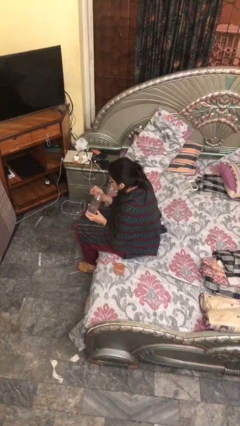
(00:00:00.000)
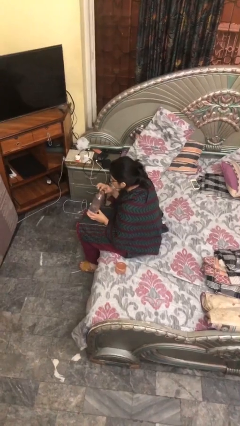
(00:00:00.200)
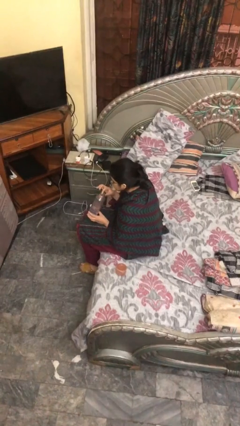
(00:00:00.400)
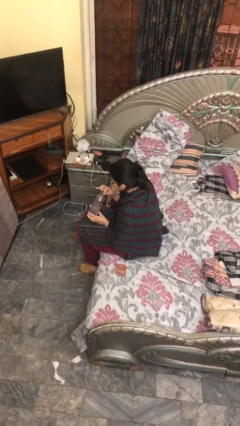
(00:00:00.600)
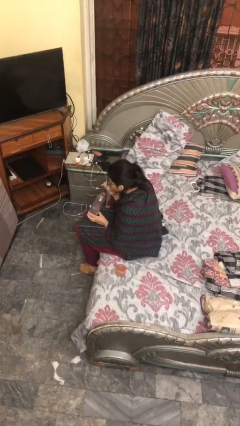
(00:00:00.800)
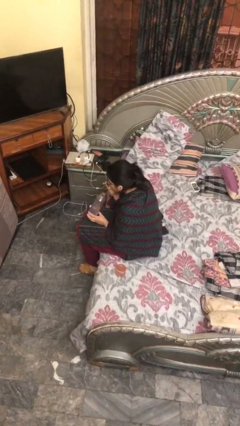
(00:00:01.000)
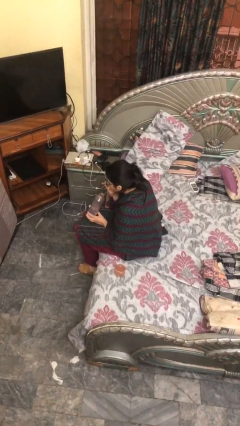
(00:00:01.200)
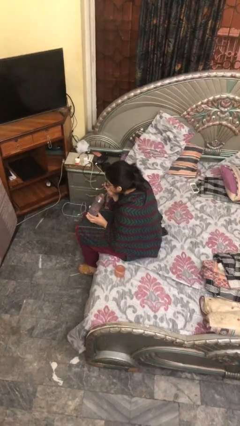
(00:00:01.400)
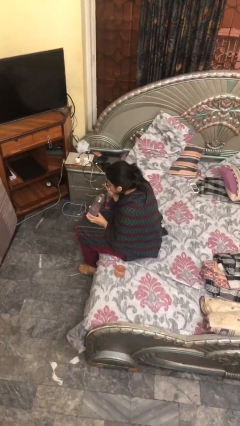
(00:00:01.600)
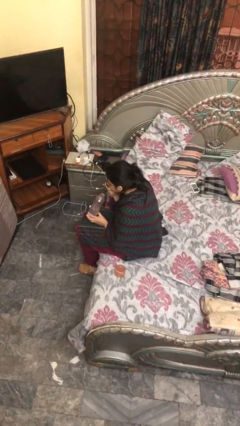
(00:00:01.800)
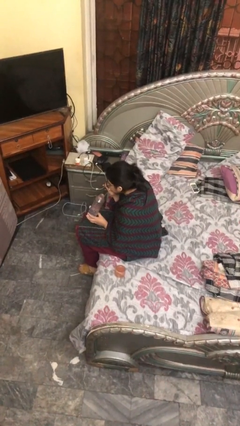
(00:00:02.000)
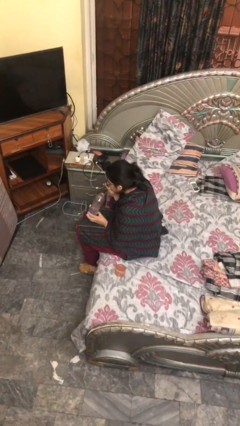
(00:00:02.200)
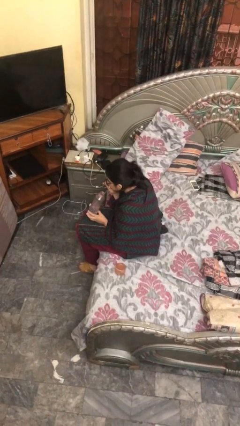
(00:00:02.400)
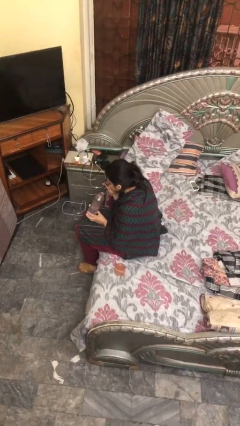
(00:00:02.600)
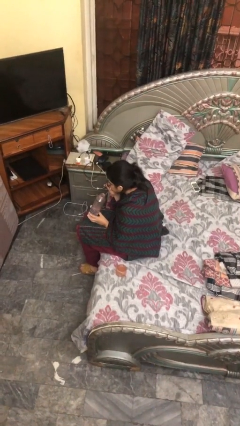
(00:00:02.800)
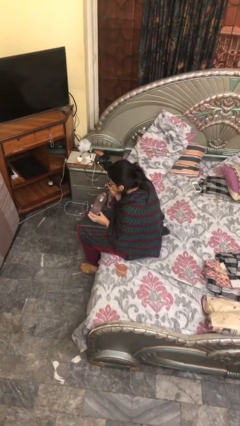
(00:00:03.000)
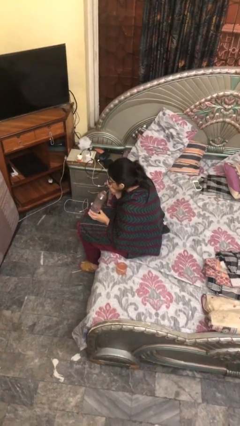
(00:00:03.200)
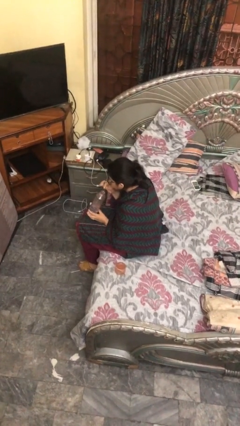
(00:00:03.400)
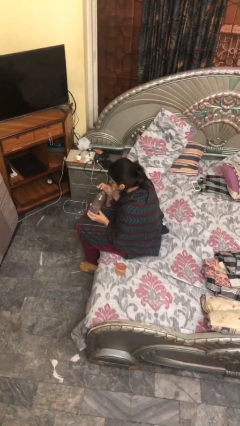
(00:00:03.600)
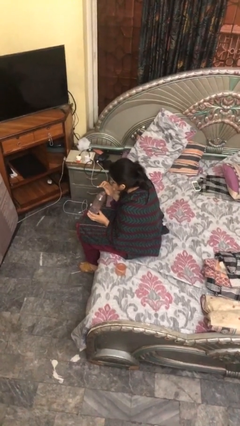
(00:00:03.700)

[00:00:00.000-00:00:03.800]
person drinks from straw

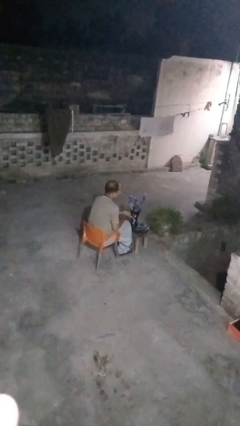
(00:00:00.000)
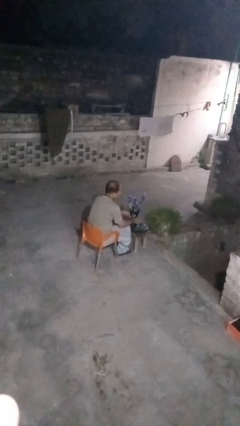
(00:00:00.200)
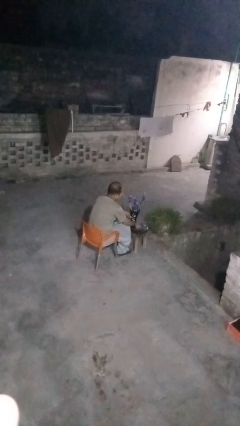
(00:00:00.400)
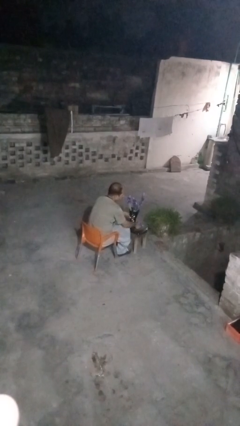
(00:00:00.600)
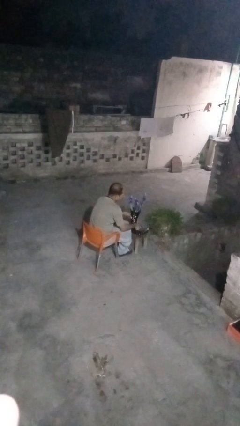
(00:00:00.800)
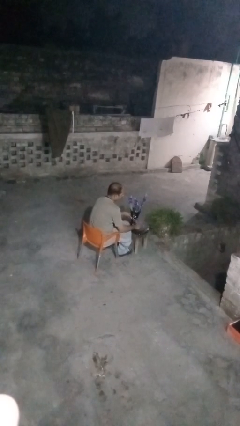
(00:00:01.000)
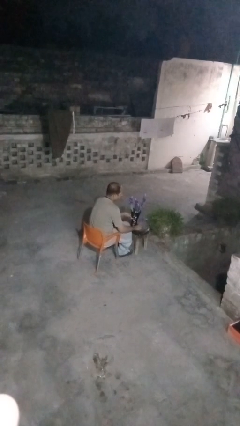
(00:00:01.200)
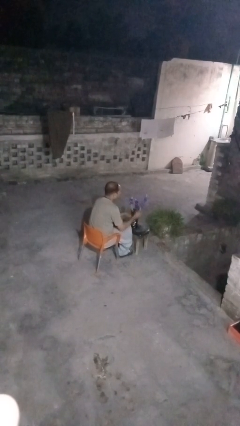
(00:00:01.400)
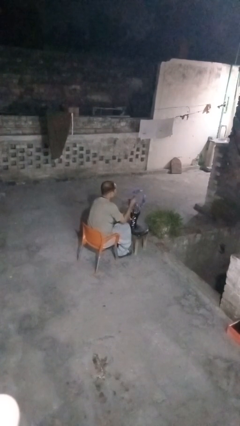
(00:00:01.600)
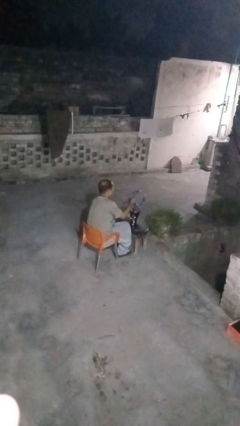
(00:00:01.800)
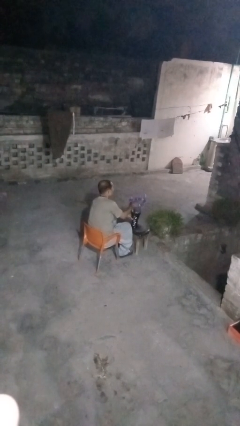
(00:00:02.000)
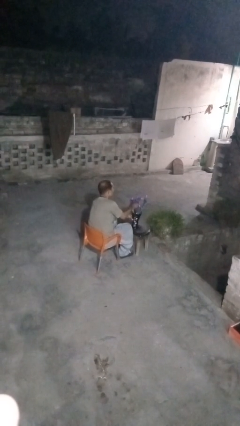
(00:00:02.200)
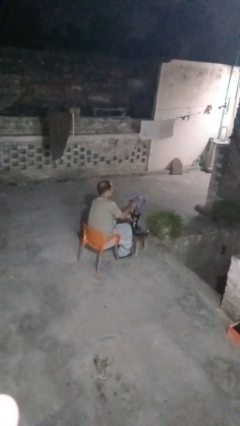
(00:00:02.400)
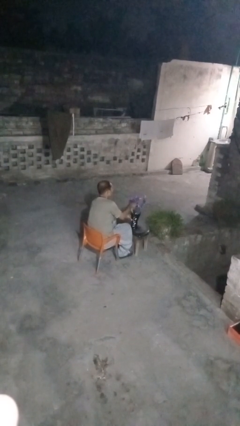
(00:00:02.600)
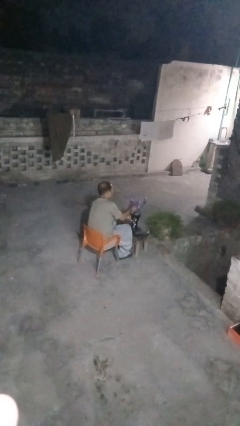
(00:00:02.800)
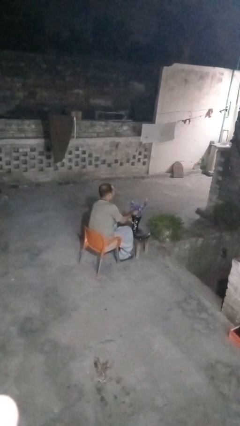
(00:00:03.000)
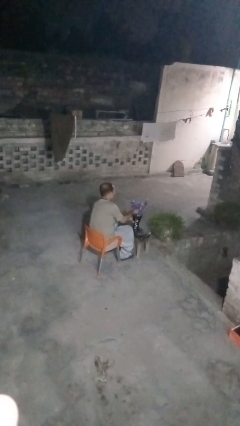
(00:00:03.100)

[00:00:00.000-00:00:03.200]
person arranges flowers in vase

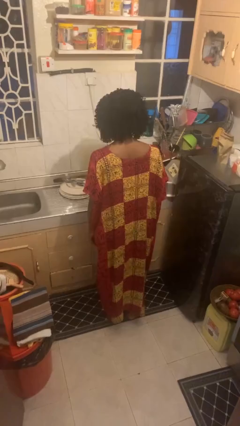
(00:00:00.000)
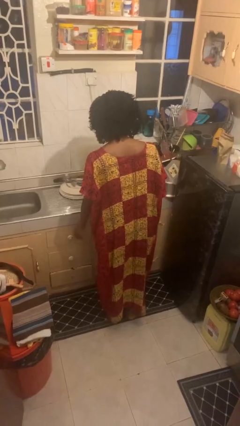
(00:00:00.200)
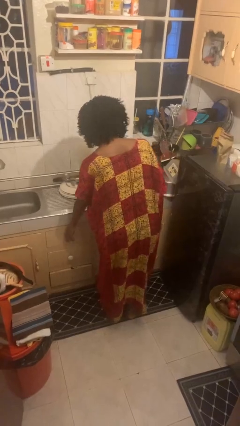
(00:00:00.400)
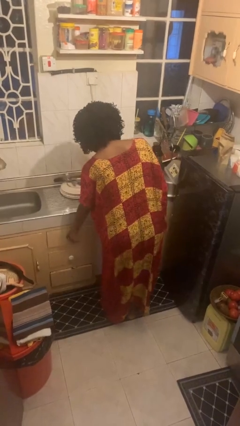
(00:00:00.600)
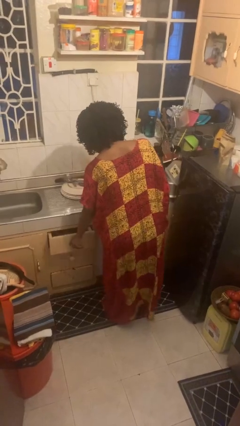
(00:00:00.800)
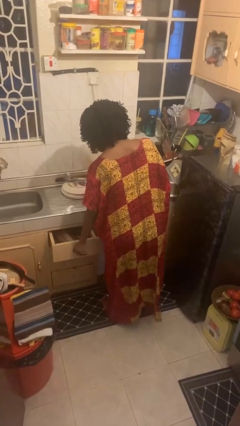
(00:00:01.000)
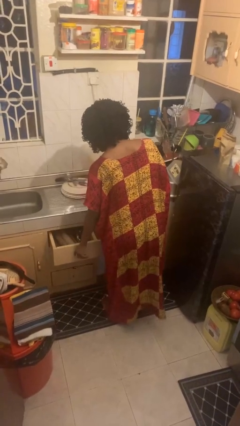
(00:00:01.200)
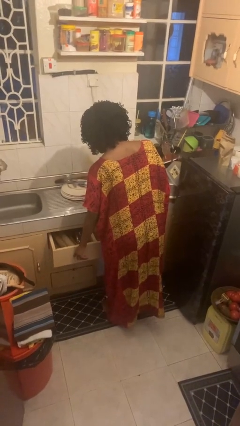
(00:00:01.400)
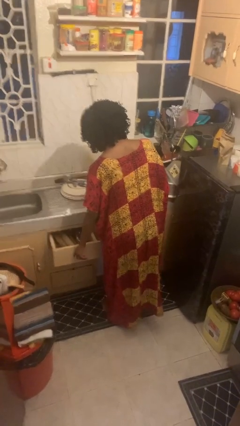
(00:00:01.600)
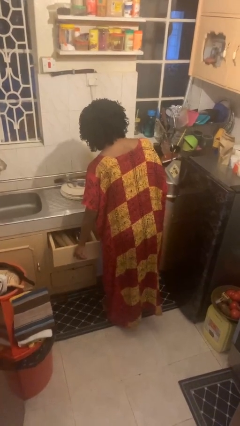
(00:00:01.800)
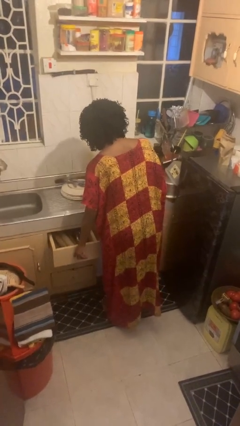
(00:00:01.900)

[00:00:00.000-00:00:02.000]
person opens kitchen drawer

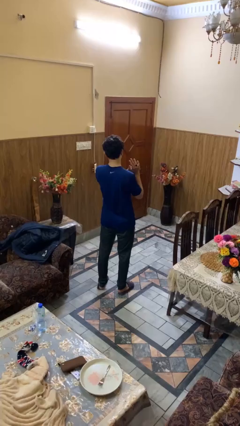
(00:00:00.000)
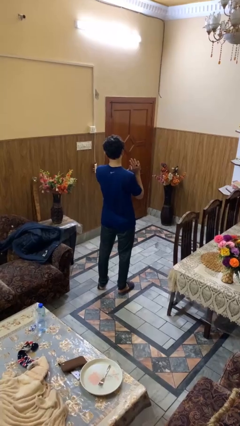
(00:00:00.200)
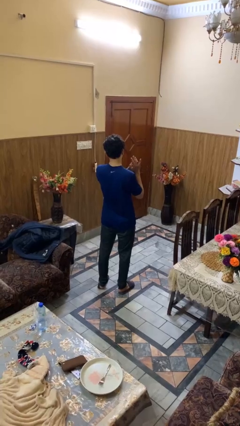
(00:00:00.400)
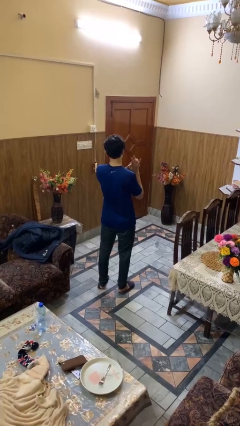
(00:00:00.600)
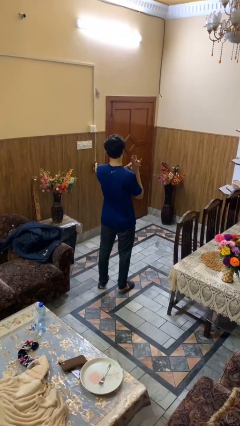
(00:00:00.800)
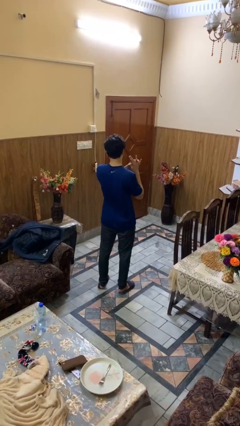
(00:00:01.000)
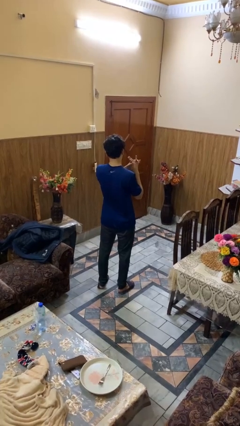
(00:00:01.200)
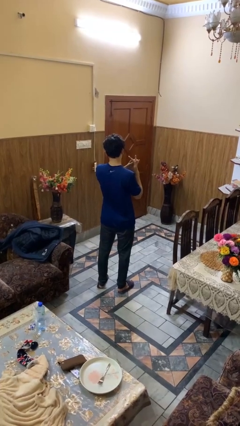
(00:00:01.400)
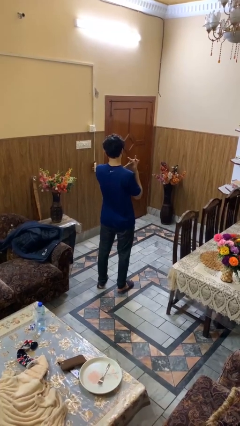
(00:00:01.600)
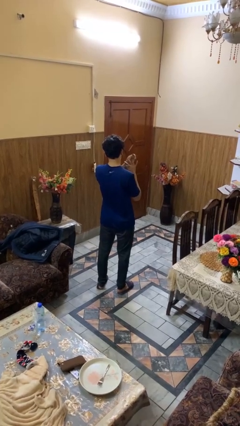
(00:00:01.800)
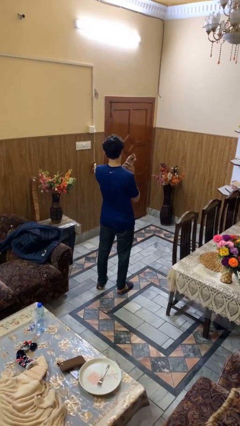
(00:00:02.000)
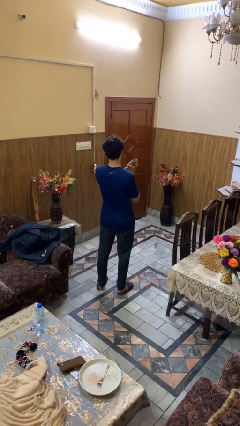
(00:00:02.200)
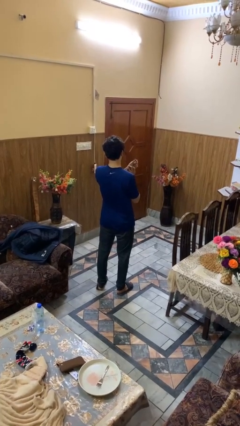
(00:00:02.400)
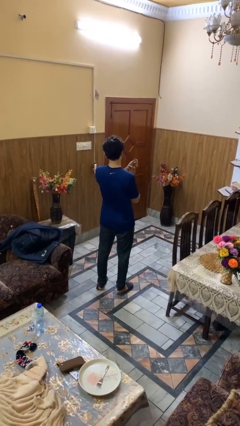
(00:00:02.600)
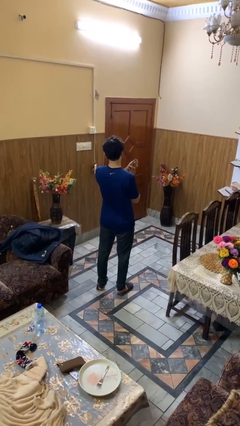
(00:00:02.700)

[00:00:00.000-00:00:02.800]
person takes off ring

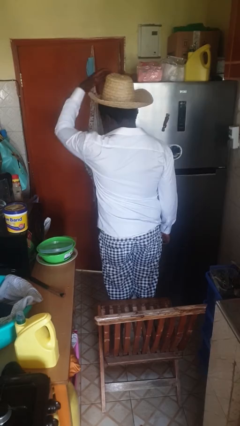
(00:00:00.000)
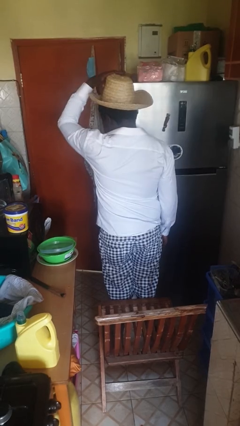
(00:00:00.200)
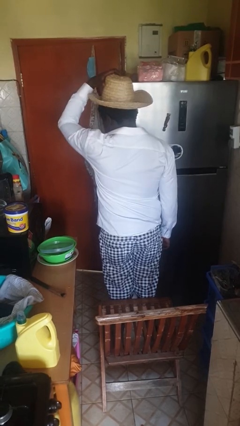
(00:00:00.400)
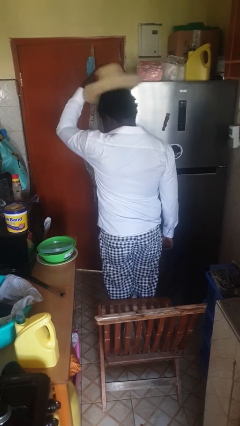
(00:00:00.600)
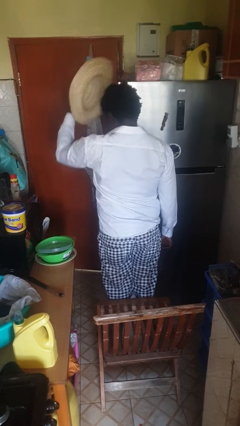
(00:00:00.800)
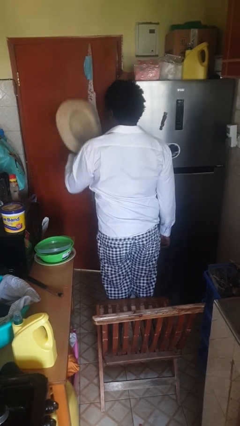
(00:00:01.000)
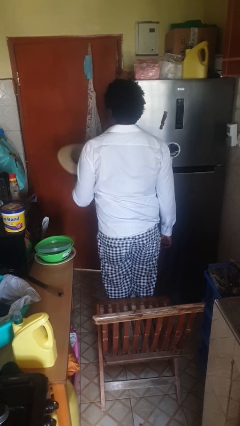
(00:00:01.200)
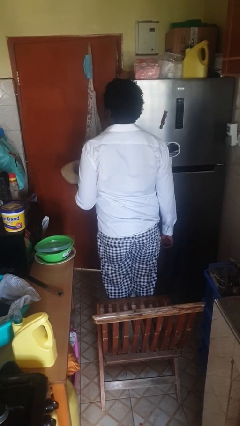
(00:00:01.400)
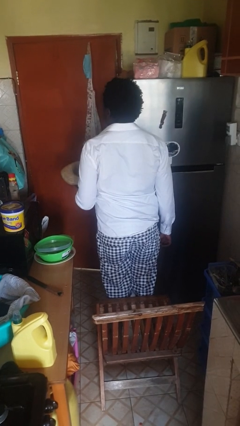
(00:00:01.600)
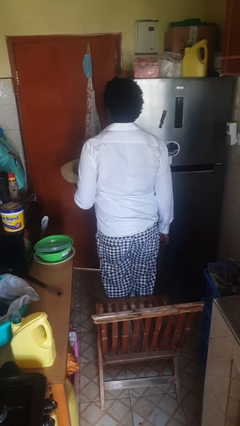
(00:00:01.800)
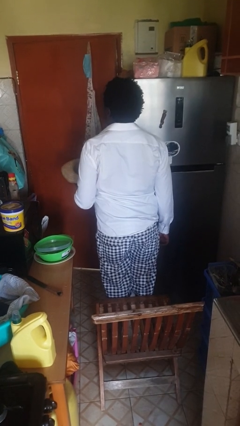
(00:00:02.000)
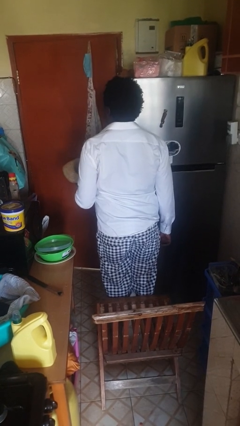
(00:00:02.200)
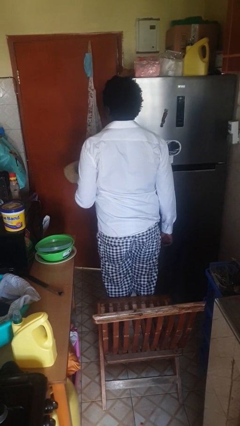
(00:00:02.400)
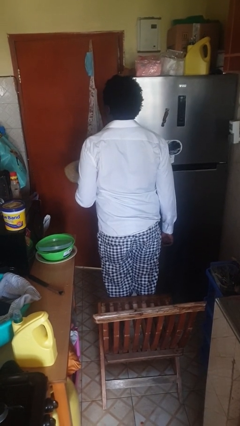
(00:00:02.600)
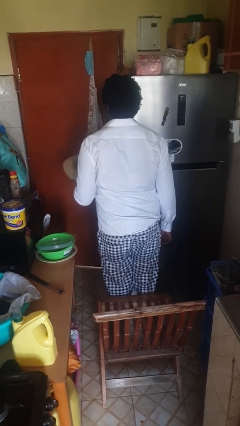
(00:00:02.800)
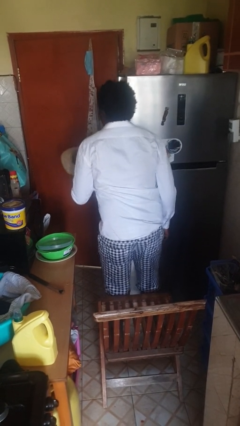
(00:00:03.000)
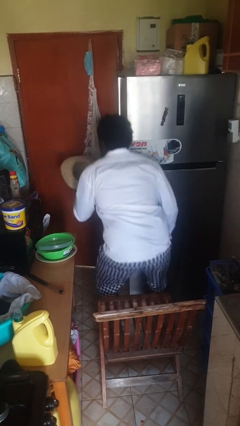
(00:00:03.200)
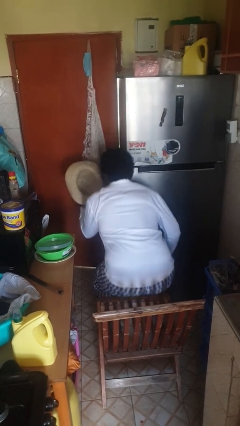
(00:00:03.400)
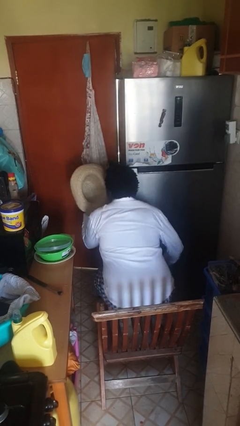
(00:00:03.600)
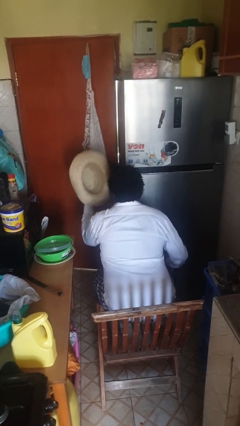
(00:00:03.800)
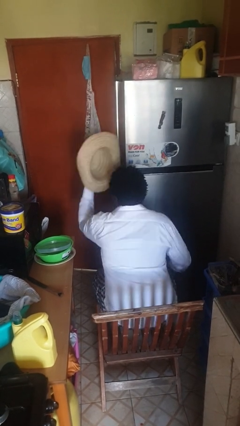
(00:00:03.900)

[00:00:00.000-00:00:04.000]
person takes off hat

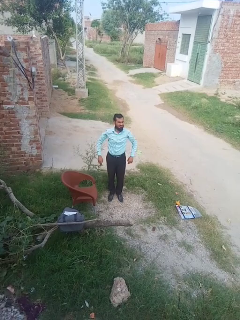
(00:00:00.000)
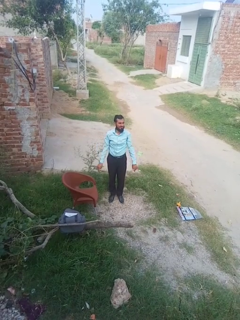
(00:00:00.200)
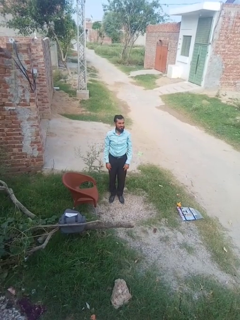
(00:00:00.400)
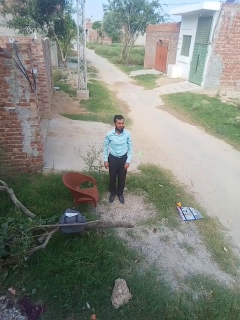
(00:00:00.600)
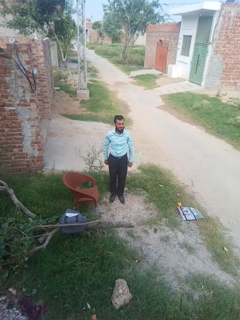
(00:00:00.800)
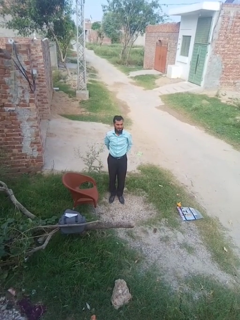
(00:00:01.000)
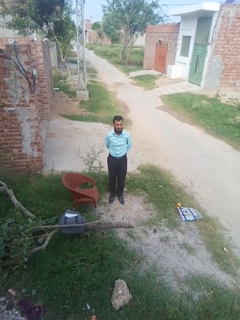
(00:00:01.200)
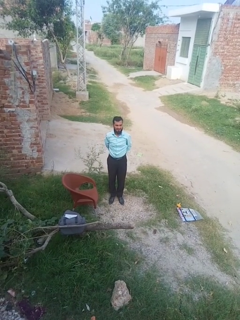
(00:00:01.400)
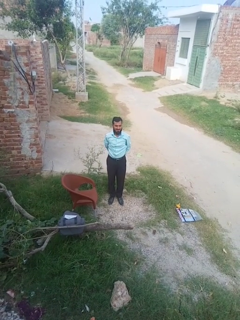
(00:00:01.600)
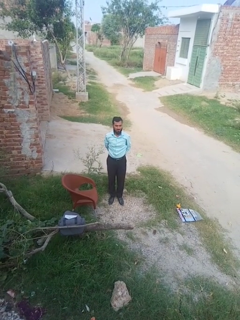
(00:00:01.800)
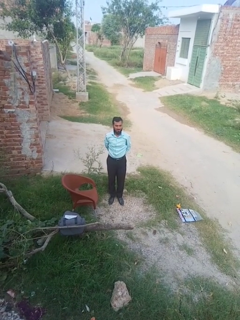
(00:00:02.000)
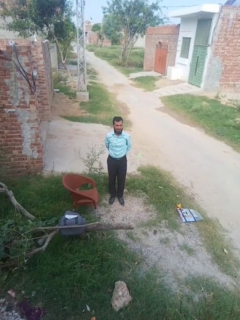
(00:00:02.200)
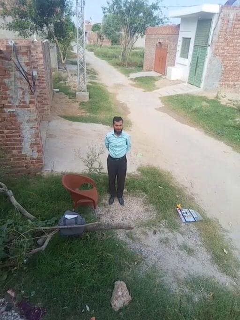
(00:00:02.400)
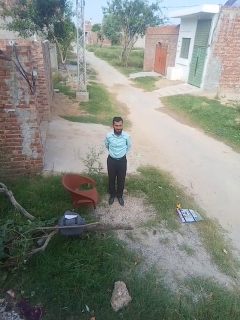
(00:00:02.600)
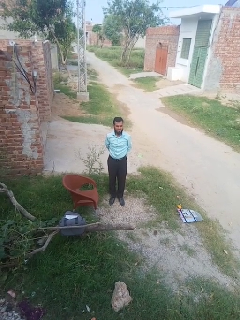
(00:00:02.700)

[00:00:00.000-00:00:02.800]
person stretches back
